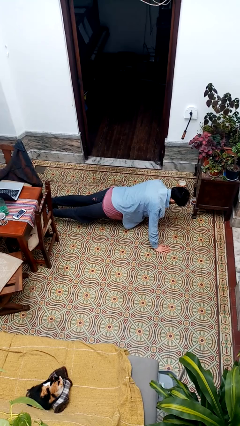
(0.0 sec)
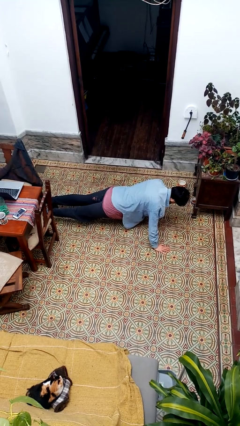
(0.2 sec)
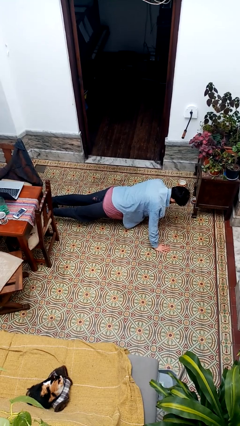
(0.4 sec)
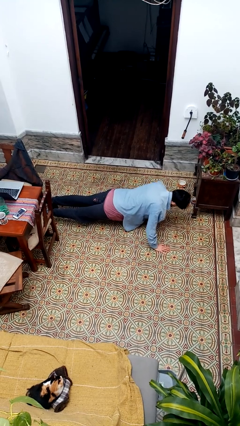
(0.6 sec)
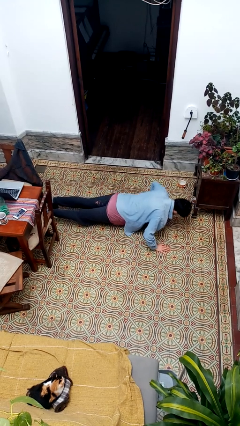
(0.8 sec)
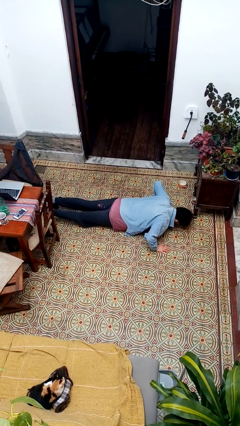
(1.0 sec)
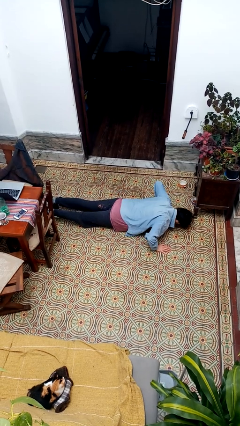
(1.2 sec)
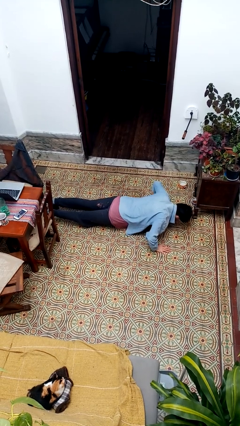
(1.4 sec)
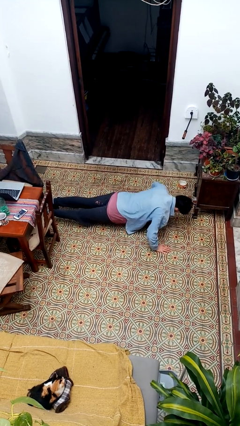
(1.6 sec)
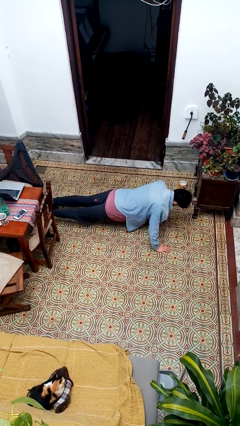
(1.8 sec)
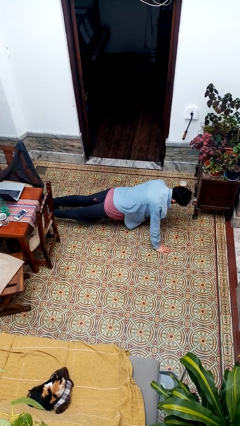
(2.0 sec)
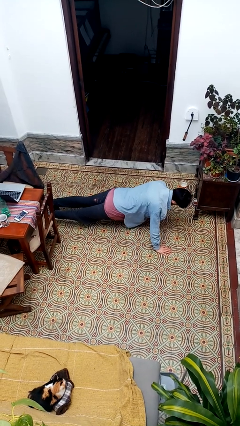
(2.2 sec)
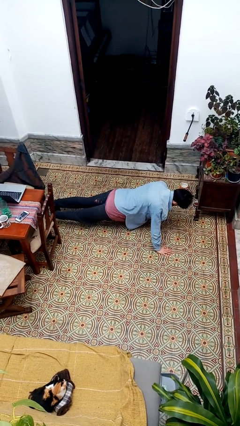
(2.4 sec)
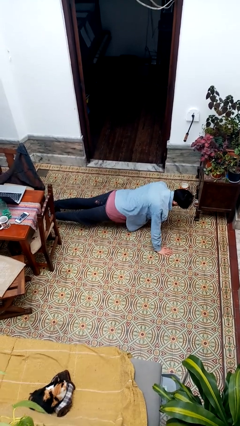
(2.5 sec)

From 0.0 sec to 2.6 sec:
person exercises with pushup

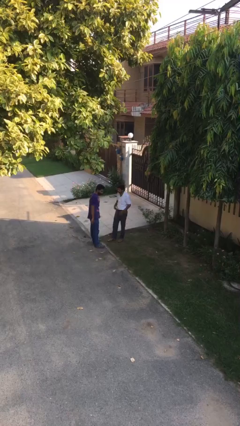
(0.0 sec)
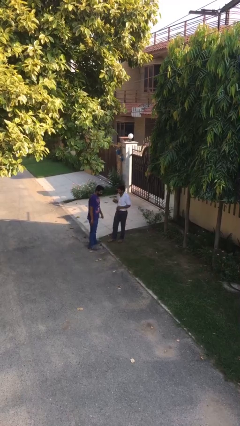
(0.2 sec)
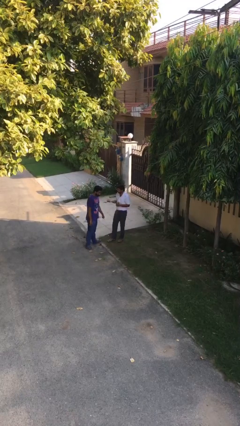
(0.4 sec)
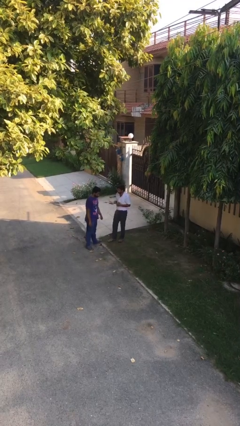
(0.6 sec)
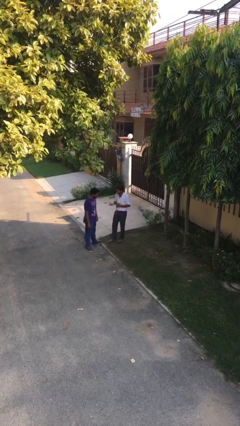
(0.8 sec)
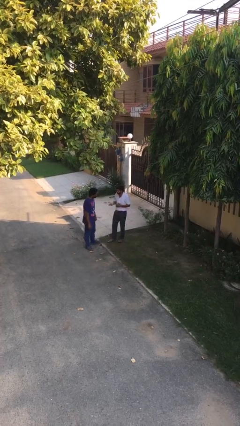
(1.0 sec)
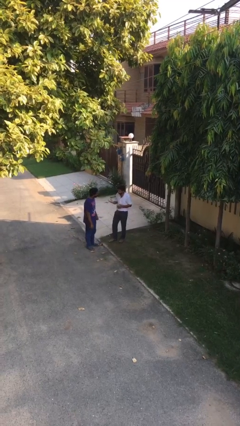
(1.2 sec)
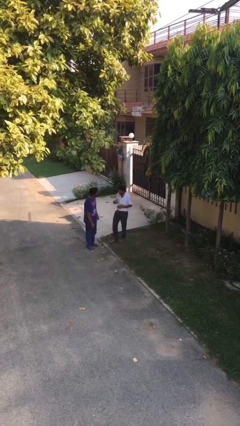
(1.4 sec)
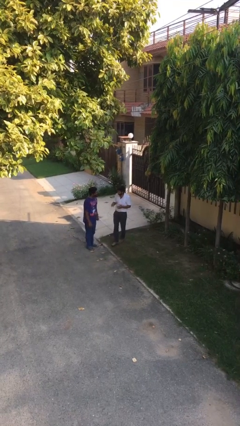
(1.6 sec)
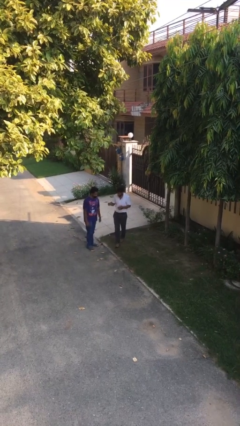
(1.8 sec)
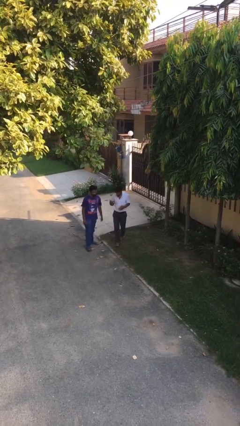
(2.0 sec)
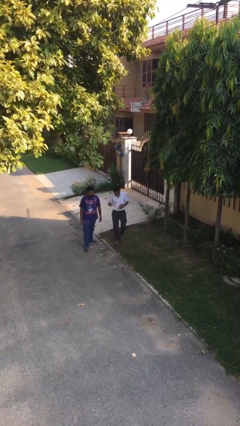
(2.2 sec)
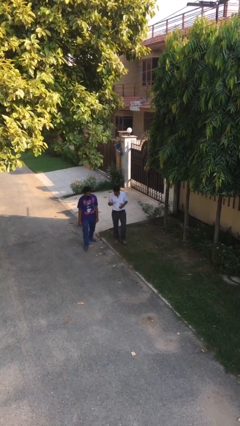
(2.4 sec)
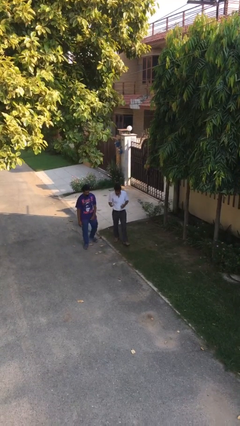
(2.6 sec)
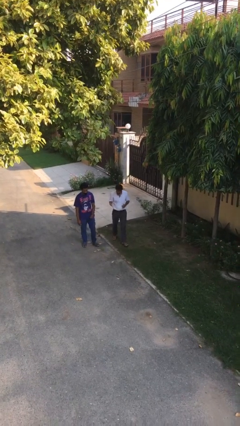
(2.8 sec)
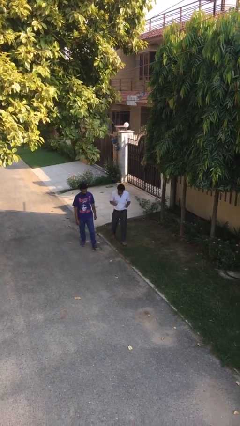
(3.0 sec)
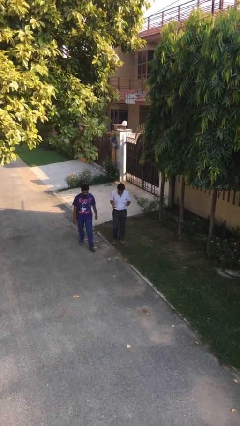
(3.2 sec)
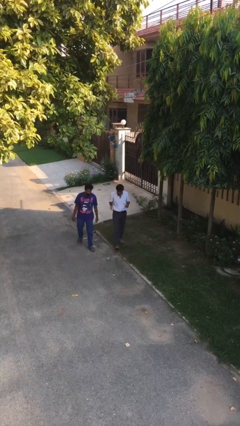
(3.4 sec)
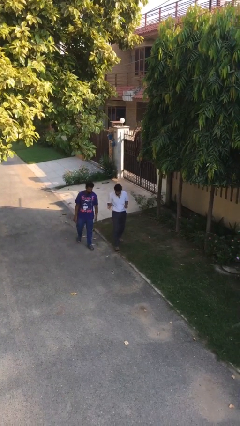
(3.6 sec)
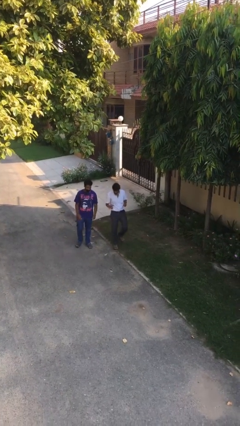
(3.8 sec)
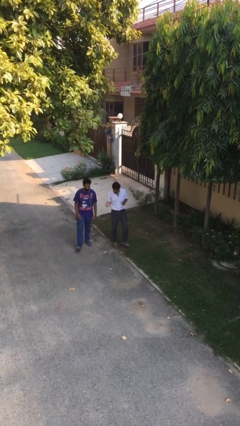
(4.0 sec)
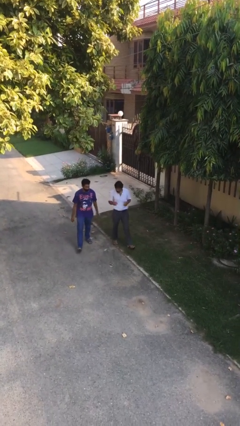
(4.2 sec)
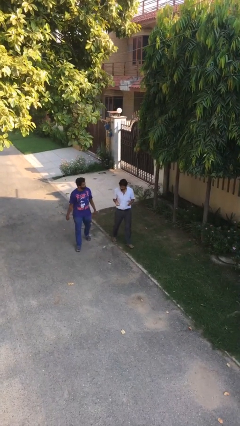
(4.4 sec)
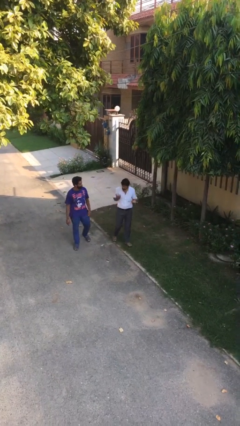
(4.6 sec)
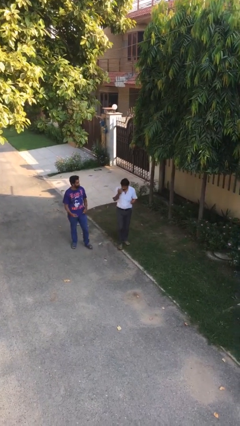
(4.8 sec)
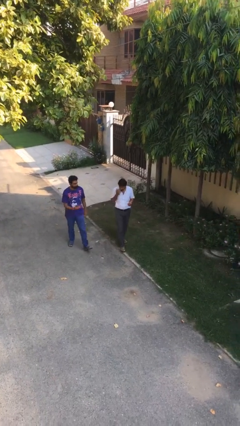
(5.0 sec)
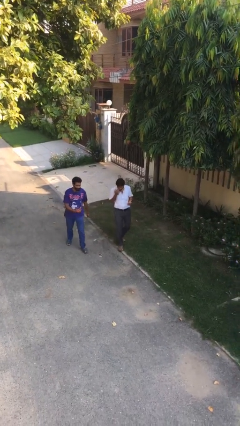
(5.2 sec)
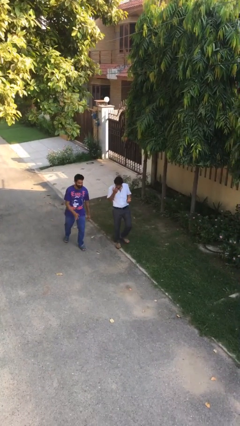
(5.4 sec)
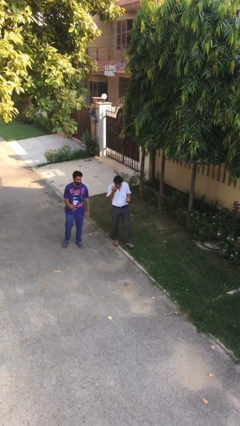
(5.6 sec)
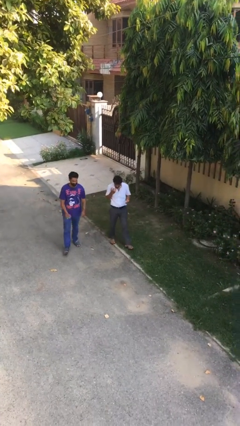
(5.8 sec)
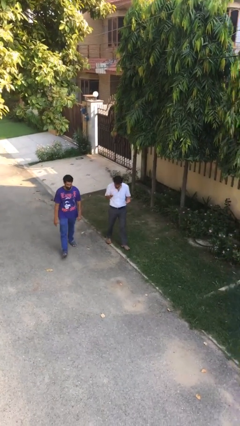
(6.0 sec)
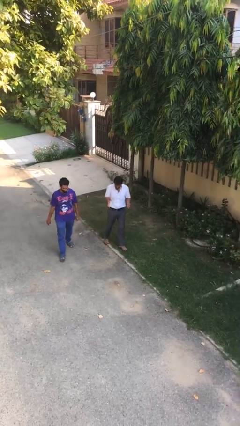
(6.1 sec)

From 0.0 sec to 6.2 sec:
person talks to person

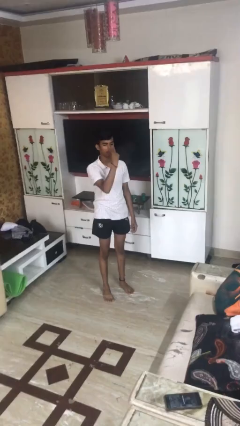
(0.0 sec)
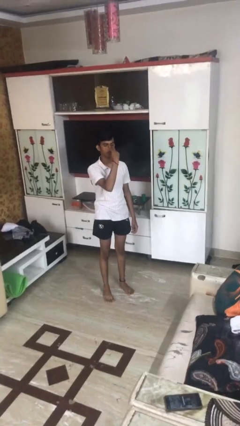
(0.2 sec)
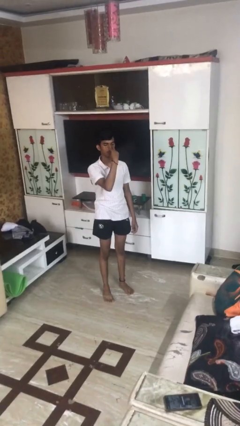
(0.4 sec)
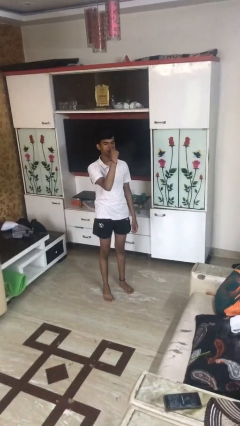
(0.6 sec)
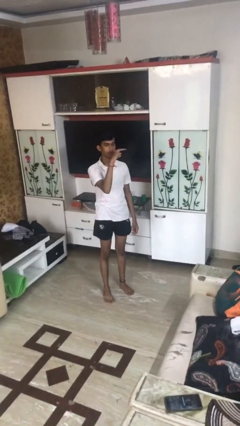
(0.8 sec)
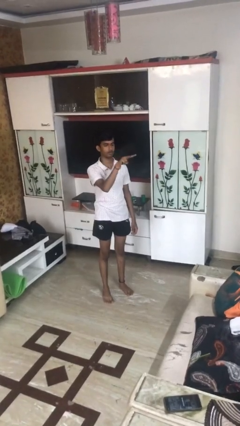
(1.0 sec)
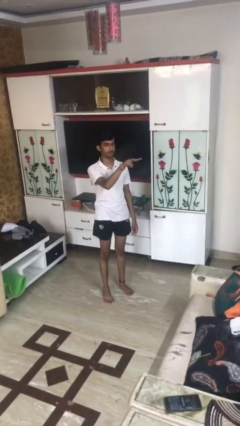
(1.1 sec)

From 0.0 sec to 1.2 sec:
person gestures watch closely

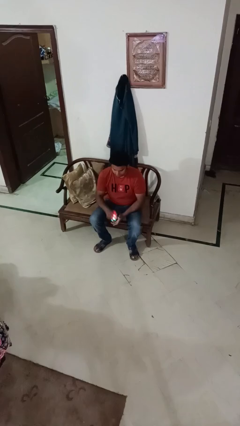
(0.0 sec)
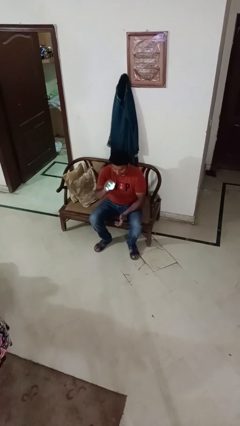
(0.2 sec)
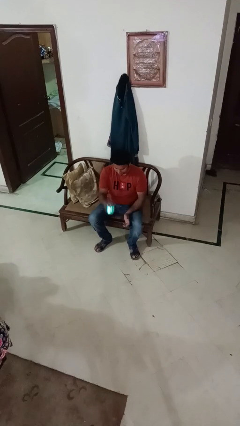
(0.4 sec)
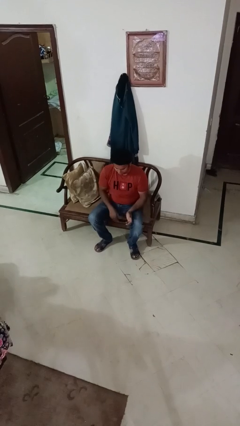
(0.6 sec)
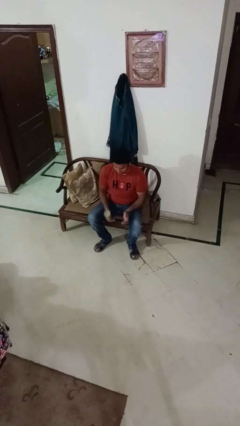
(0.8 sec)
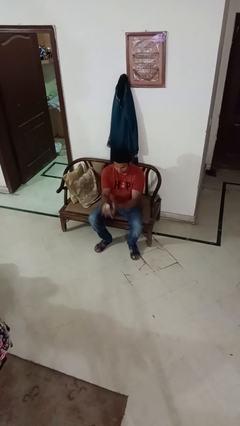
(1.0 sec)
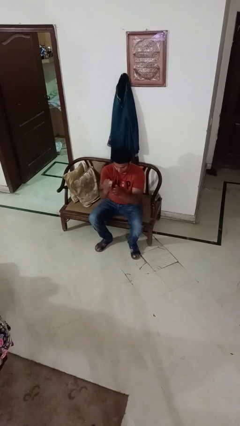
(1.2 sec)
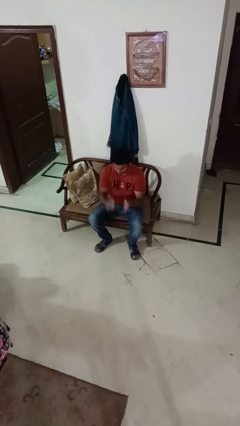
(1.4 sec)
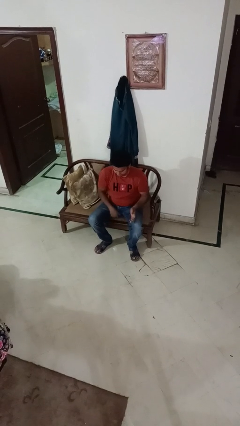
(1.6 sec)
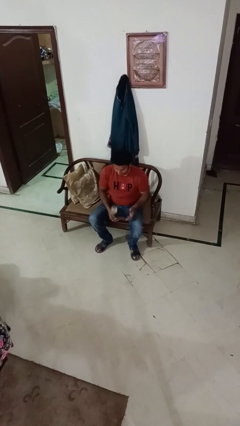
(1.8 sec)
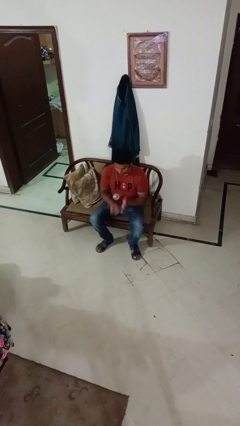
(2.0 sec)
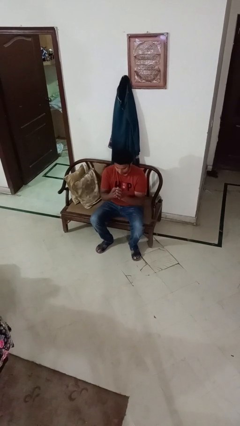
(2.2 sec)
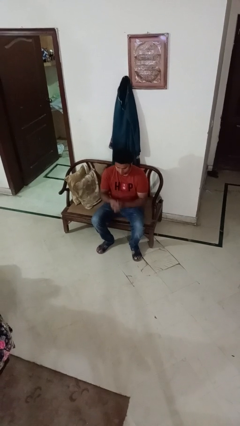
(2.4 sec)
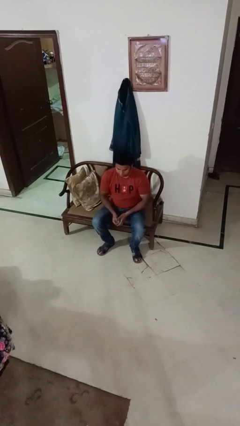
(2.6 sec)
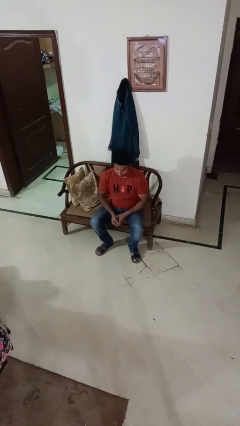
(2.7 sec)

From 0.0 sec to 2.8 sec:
person bounces ball on floor

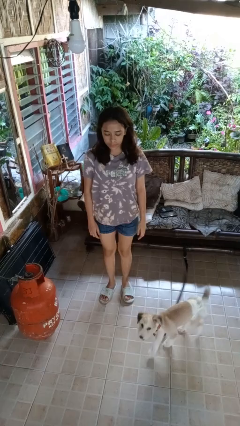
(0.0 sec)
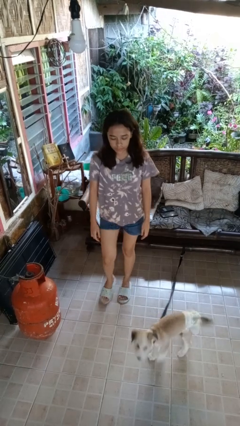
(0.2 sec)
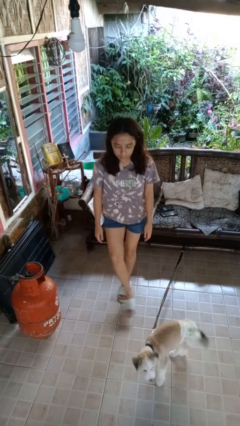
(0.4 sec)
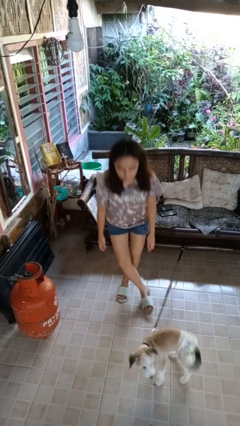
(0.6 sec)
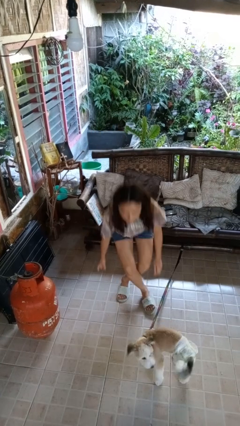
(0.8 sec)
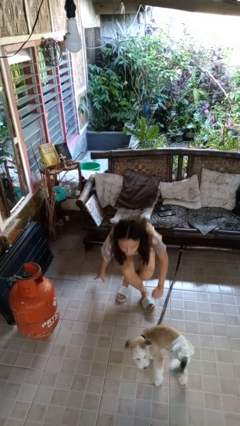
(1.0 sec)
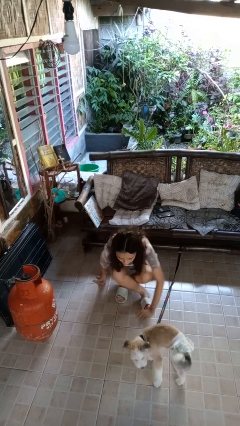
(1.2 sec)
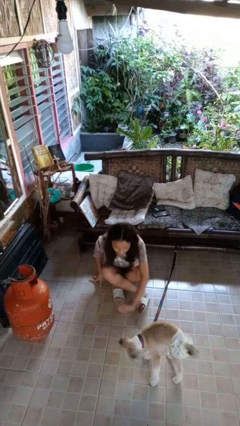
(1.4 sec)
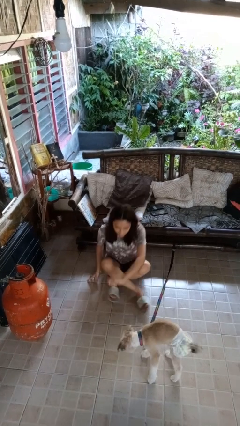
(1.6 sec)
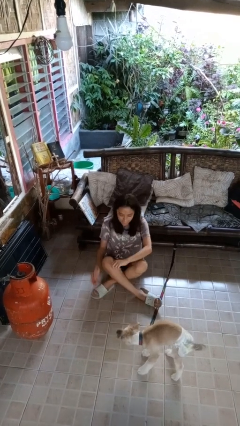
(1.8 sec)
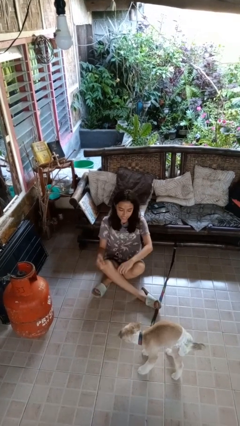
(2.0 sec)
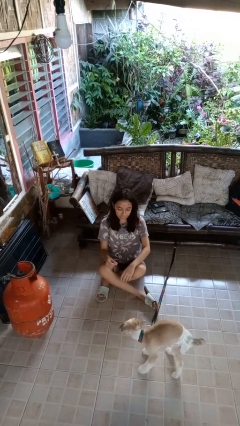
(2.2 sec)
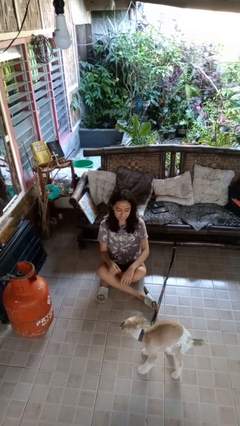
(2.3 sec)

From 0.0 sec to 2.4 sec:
person sits crisscross

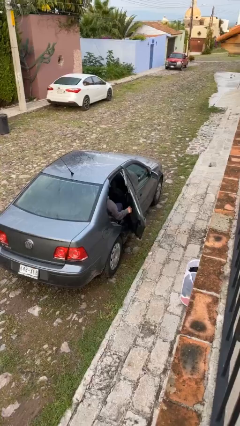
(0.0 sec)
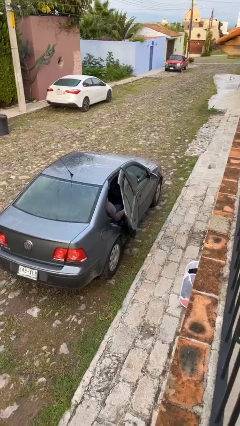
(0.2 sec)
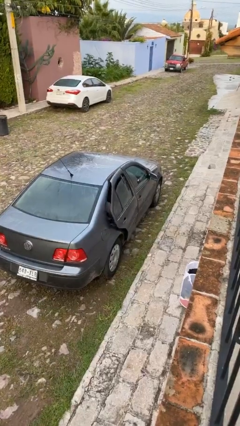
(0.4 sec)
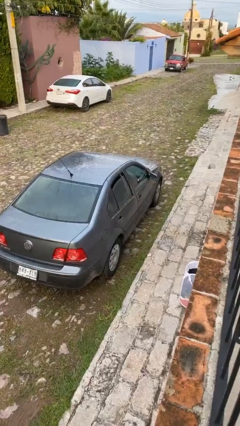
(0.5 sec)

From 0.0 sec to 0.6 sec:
person closes car door

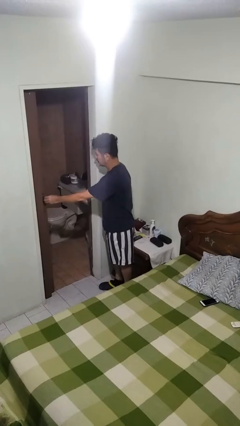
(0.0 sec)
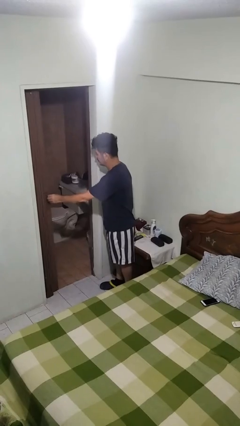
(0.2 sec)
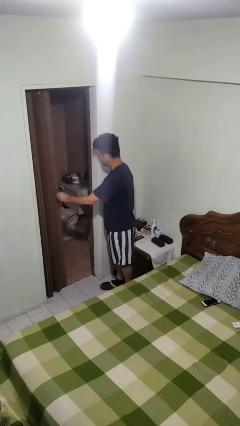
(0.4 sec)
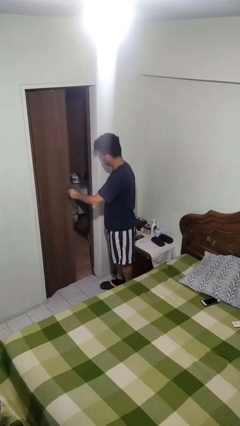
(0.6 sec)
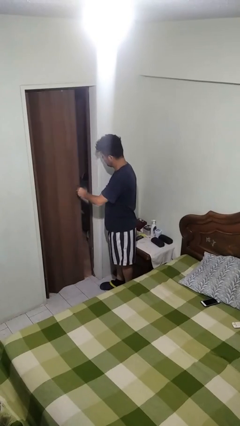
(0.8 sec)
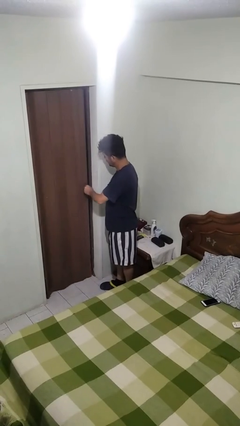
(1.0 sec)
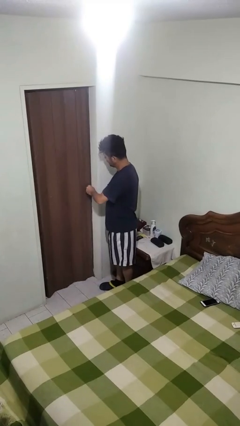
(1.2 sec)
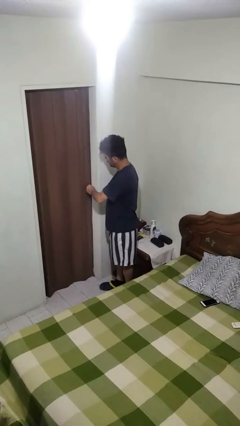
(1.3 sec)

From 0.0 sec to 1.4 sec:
person closes sliding door
